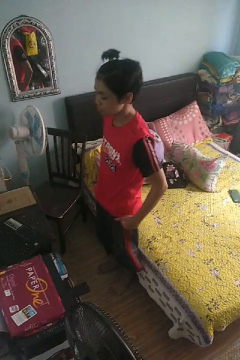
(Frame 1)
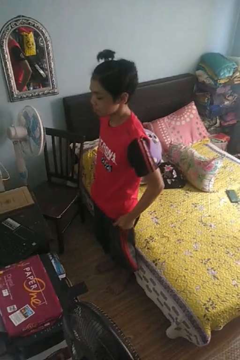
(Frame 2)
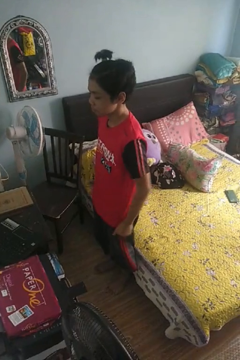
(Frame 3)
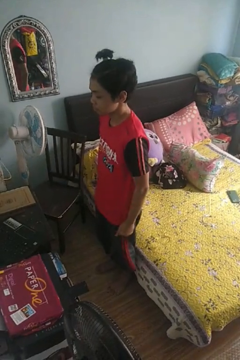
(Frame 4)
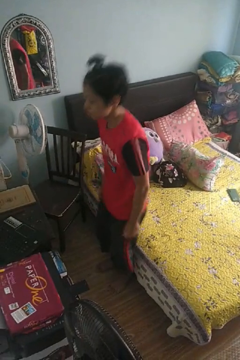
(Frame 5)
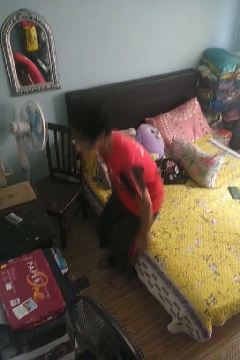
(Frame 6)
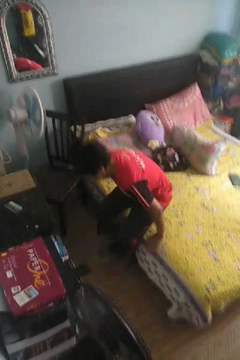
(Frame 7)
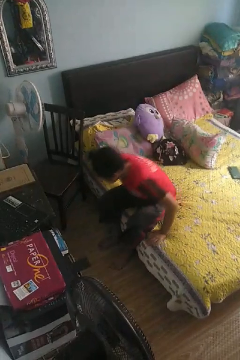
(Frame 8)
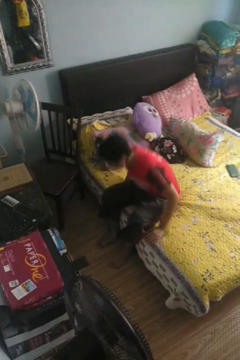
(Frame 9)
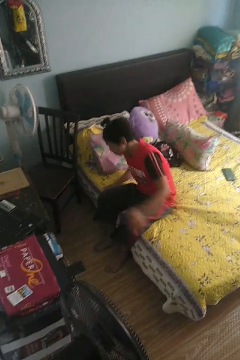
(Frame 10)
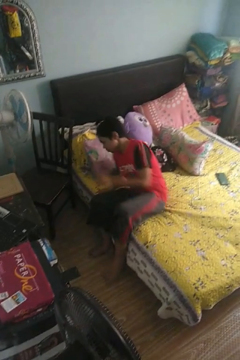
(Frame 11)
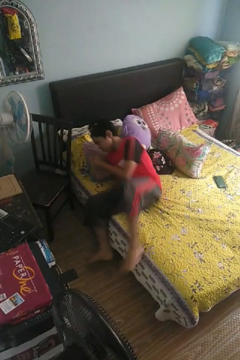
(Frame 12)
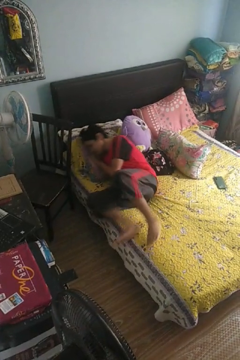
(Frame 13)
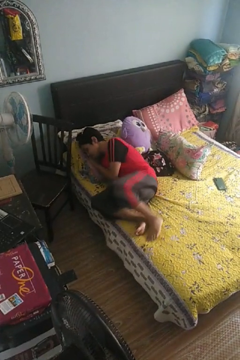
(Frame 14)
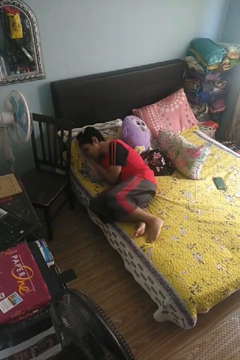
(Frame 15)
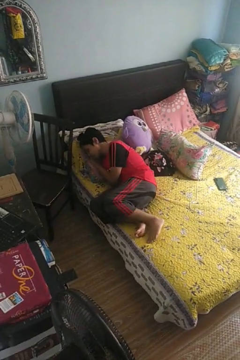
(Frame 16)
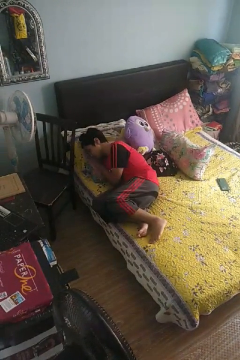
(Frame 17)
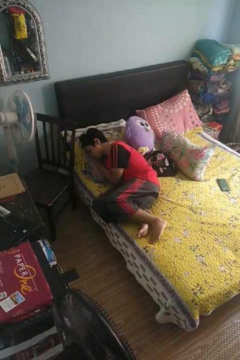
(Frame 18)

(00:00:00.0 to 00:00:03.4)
person lies down on bed

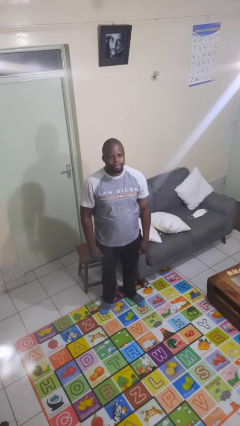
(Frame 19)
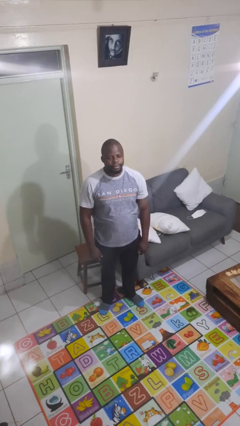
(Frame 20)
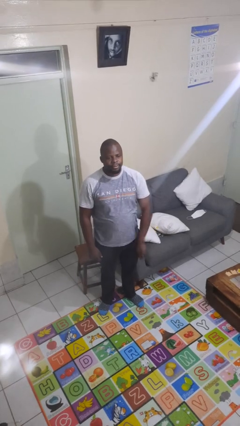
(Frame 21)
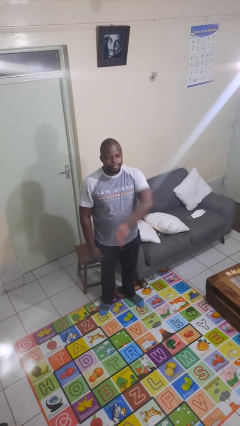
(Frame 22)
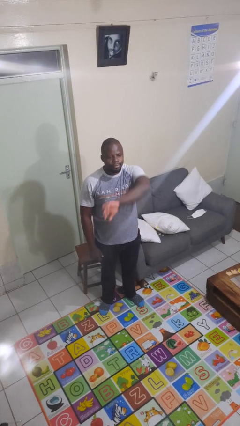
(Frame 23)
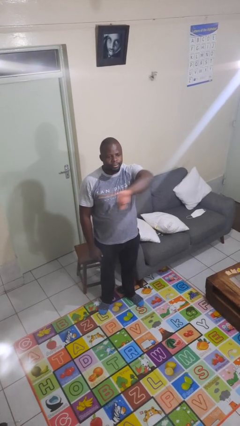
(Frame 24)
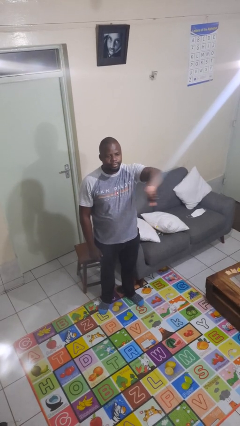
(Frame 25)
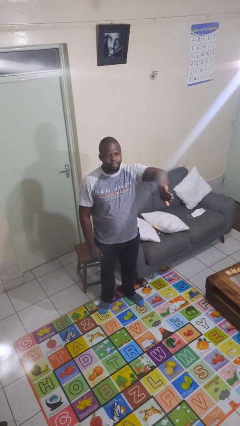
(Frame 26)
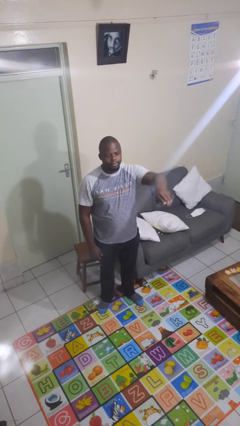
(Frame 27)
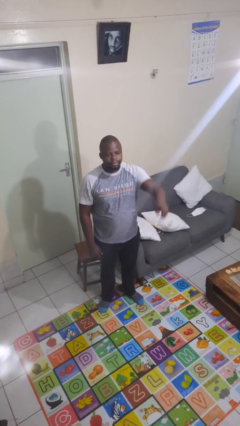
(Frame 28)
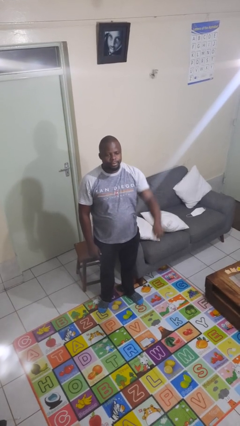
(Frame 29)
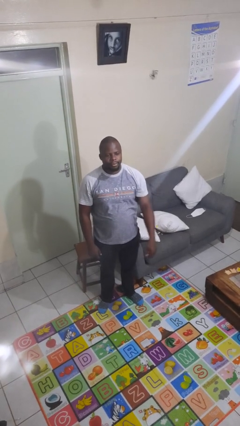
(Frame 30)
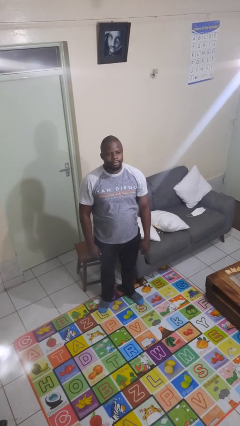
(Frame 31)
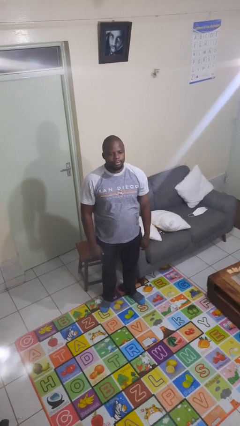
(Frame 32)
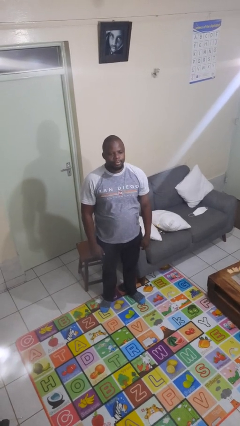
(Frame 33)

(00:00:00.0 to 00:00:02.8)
person gestures swipe left

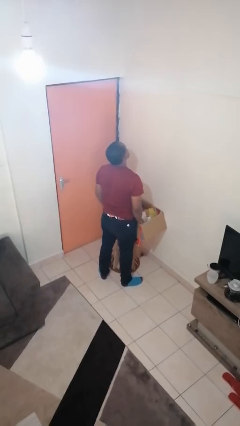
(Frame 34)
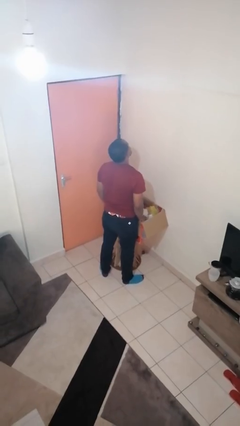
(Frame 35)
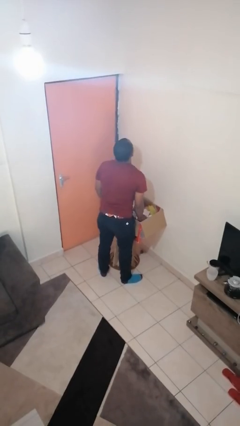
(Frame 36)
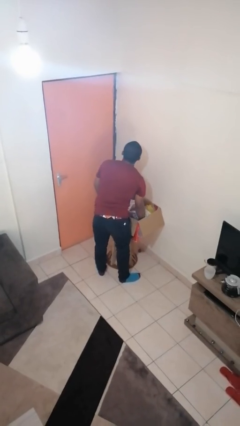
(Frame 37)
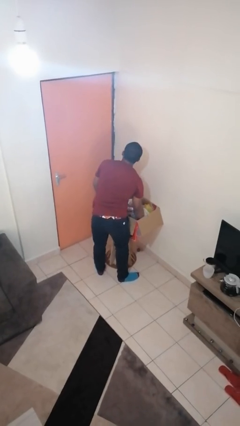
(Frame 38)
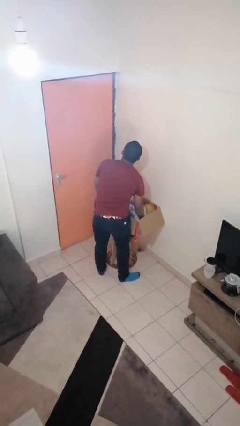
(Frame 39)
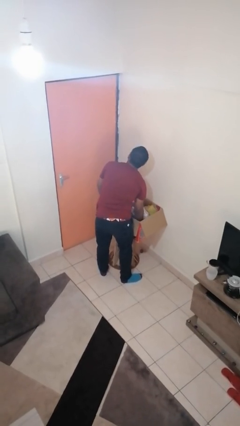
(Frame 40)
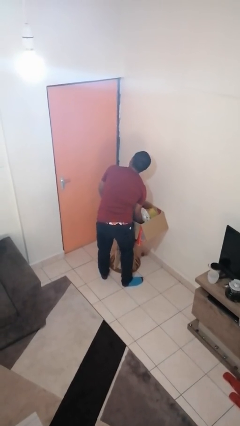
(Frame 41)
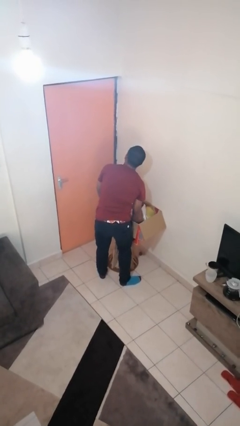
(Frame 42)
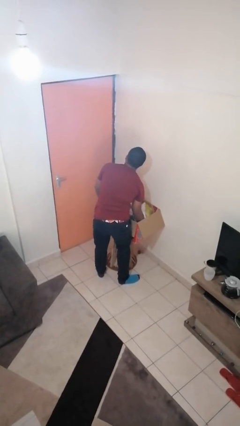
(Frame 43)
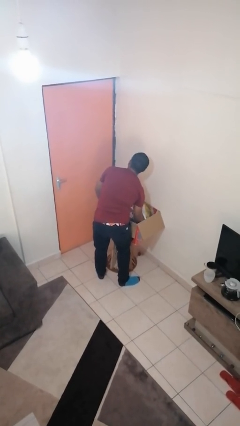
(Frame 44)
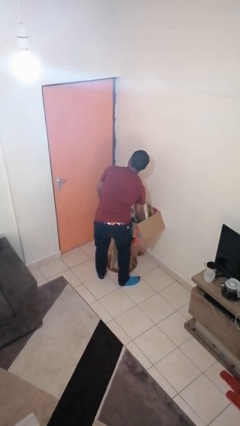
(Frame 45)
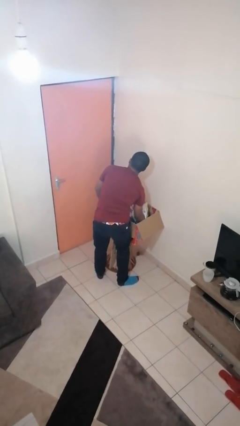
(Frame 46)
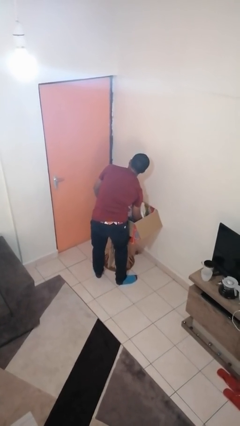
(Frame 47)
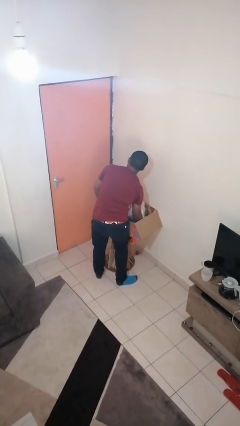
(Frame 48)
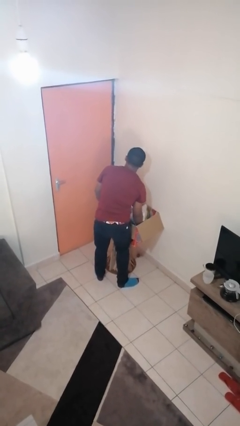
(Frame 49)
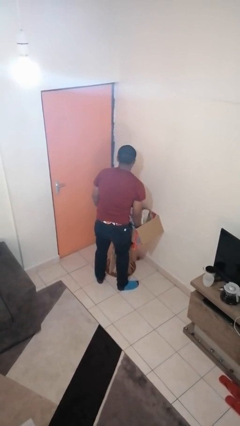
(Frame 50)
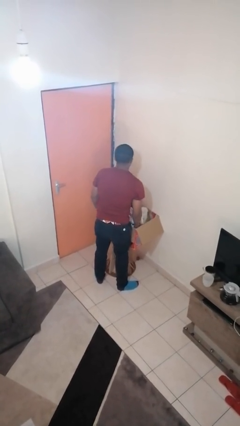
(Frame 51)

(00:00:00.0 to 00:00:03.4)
person searches in box

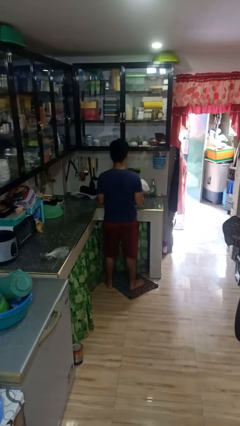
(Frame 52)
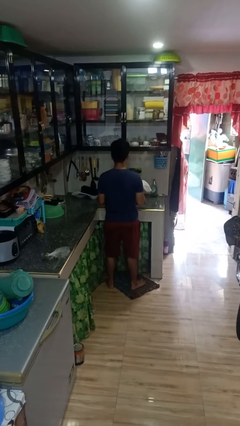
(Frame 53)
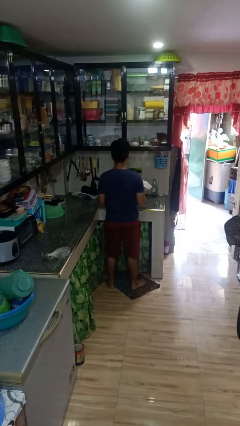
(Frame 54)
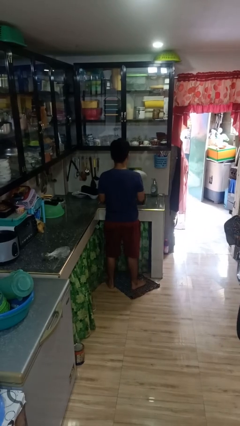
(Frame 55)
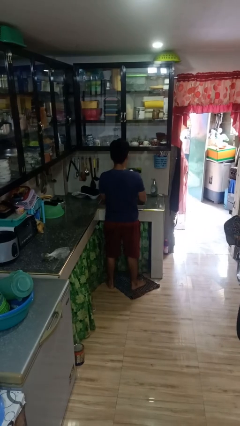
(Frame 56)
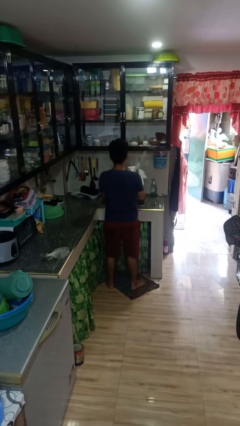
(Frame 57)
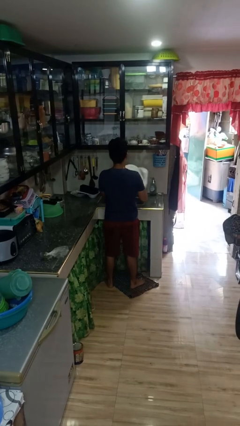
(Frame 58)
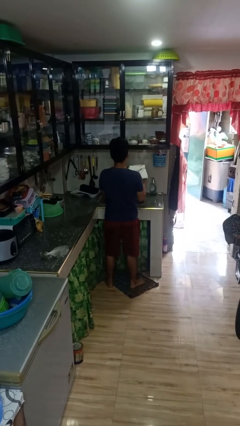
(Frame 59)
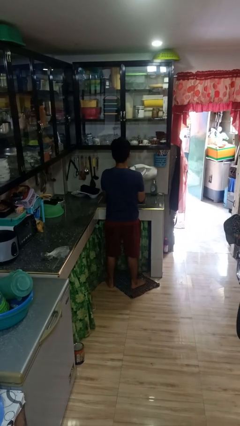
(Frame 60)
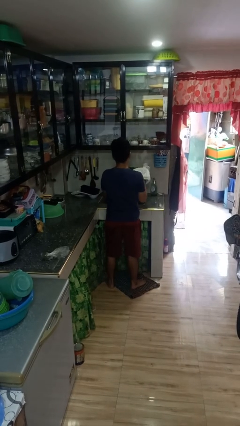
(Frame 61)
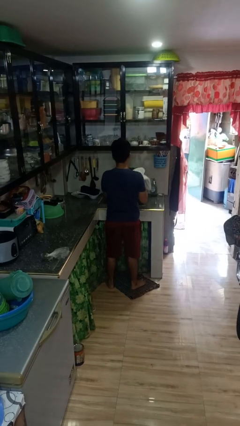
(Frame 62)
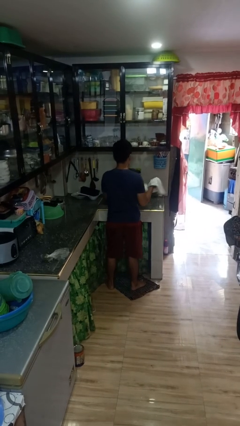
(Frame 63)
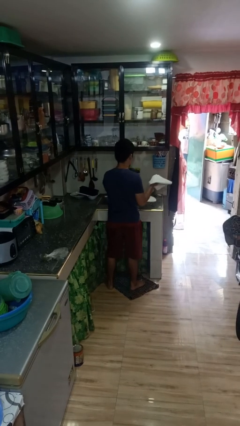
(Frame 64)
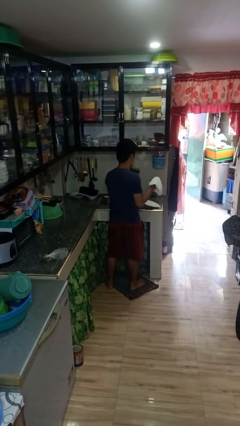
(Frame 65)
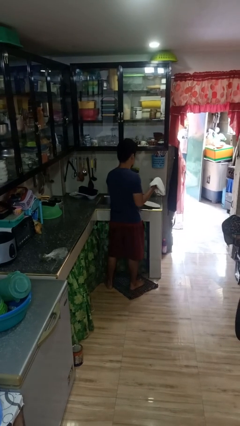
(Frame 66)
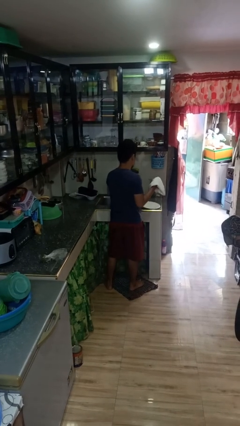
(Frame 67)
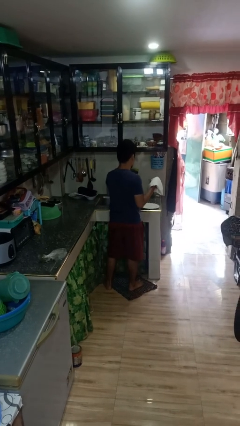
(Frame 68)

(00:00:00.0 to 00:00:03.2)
person dries dish

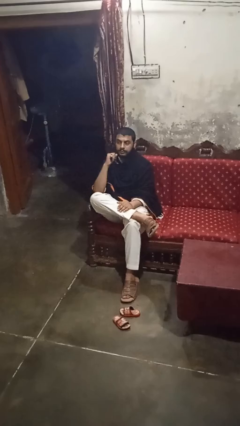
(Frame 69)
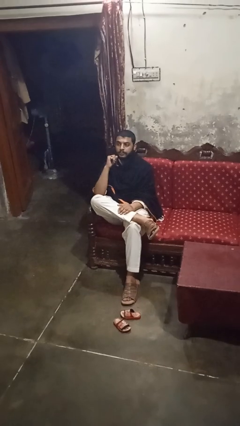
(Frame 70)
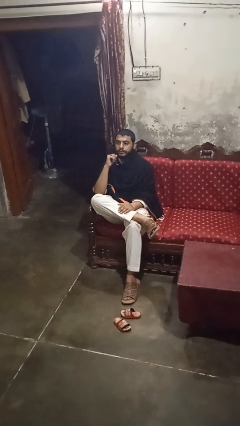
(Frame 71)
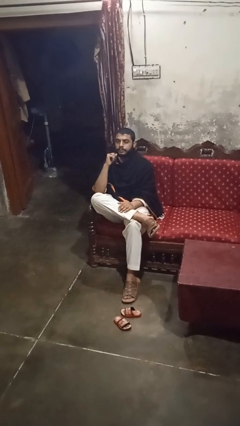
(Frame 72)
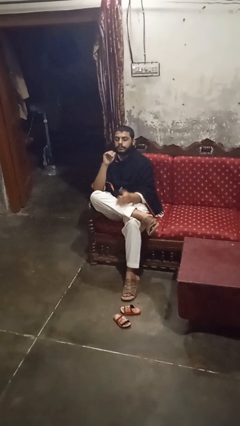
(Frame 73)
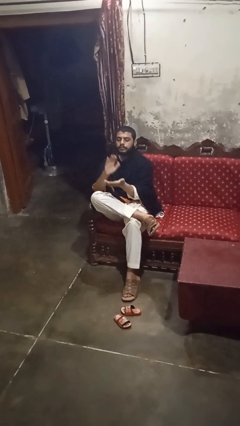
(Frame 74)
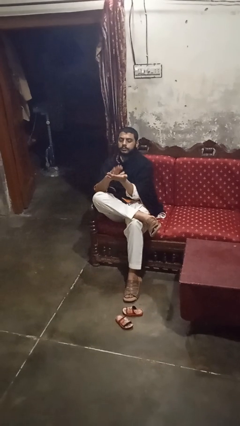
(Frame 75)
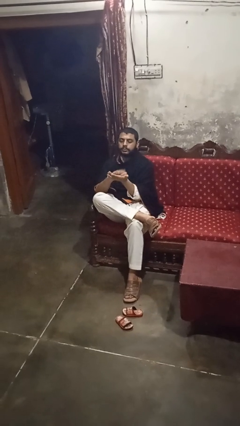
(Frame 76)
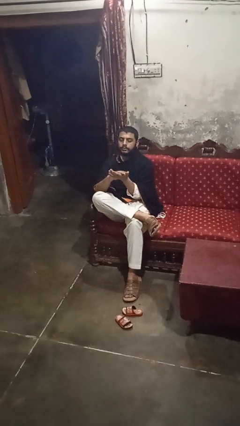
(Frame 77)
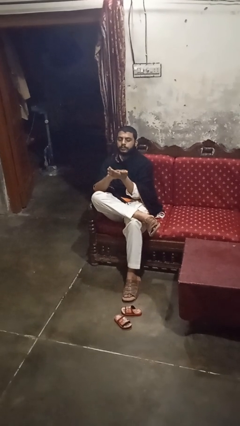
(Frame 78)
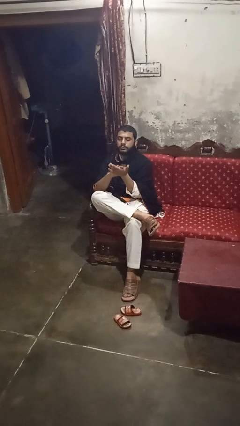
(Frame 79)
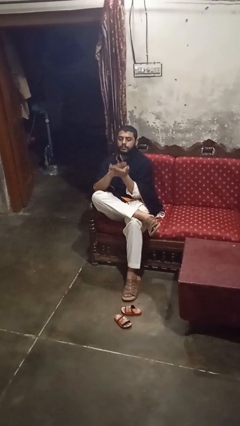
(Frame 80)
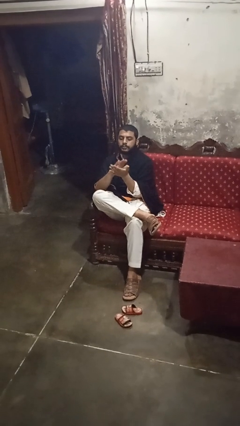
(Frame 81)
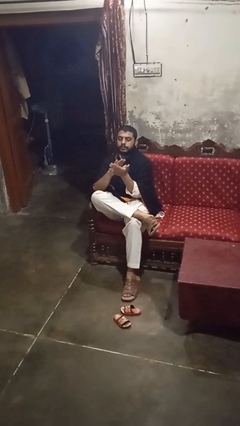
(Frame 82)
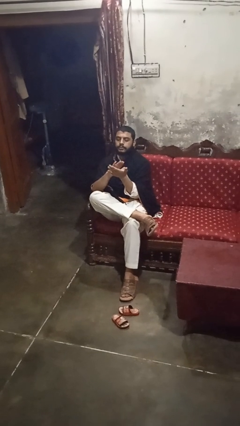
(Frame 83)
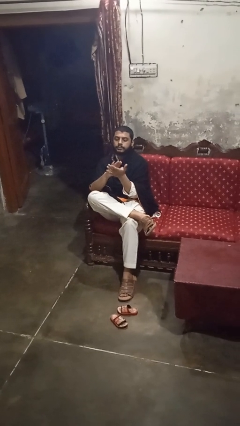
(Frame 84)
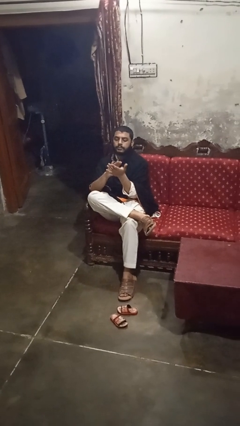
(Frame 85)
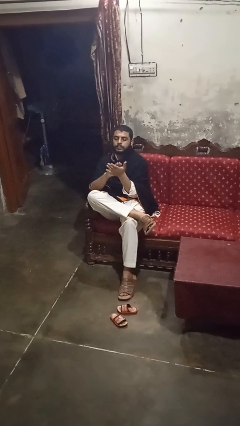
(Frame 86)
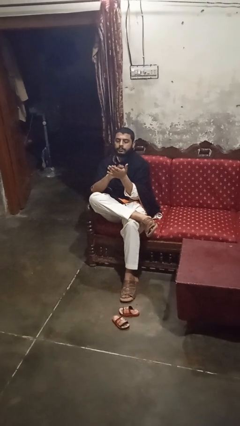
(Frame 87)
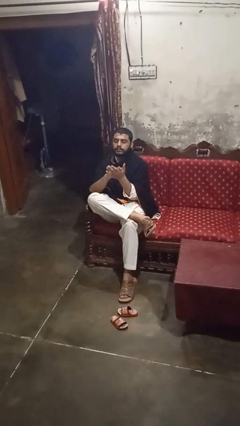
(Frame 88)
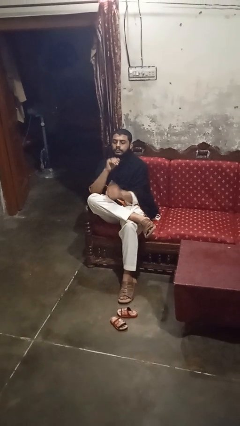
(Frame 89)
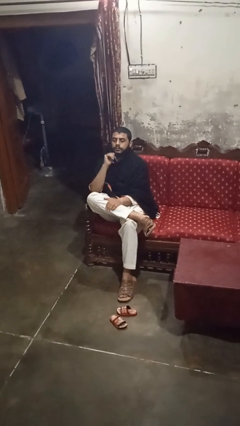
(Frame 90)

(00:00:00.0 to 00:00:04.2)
person claps hands

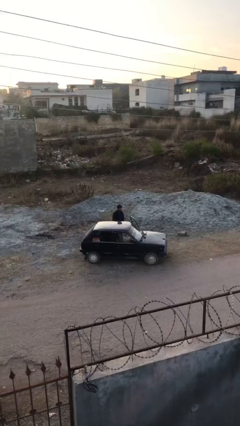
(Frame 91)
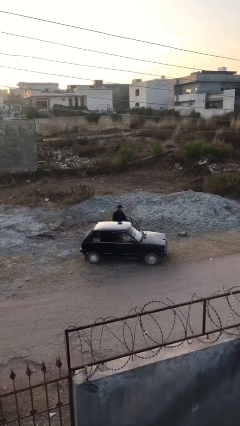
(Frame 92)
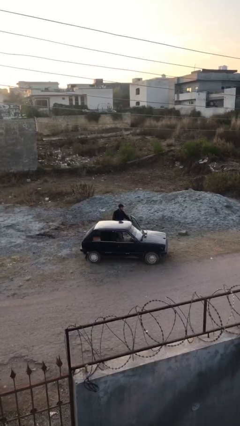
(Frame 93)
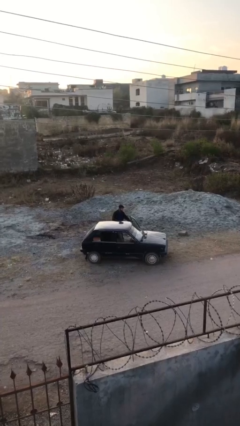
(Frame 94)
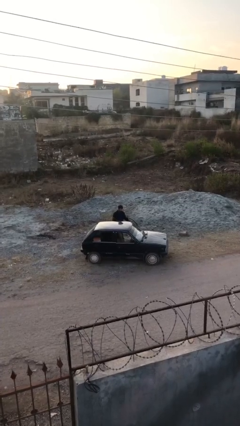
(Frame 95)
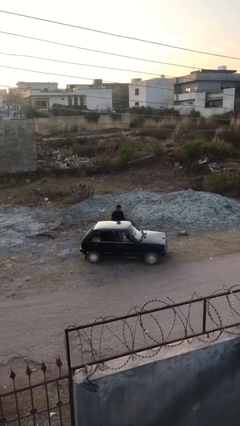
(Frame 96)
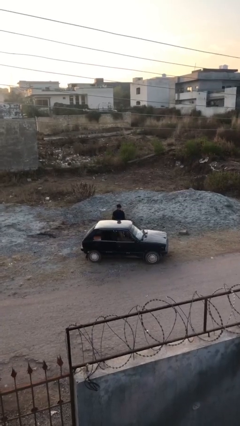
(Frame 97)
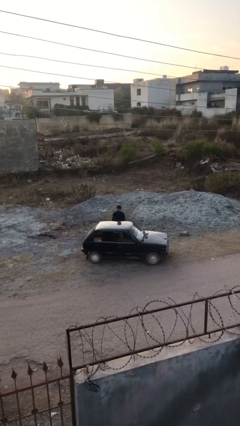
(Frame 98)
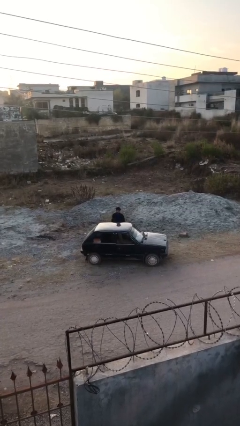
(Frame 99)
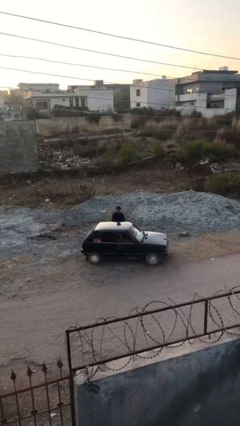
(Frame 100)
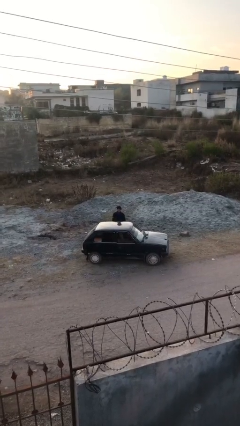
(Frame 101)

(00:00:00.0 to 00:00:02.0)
person closes car door
